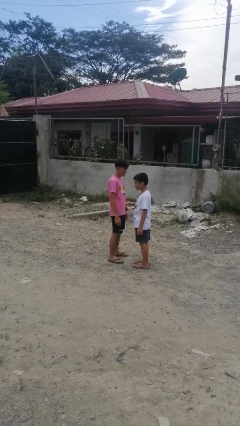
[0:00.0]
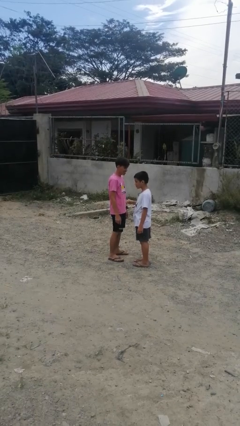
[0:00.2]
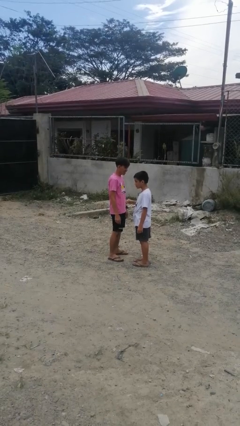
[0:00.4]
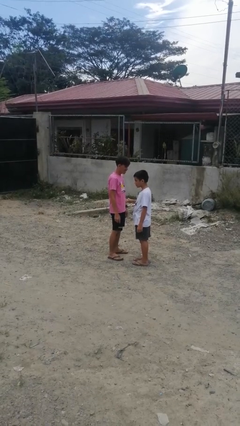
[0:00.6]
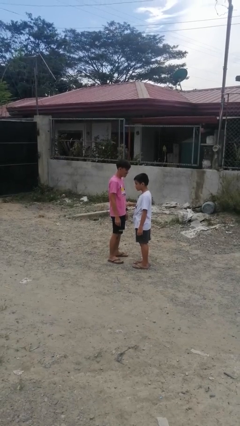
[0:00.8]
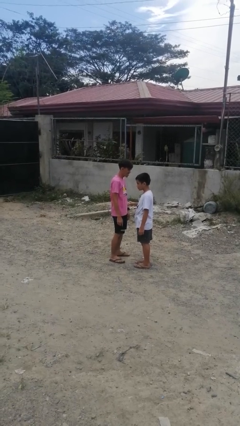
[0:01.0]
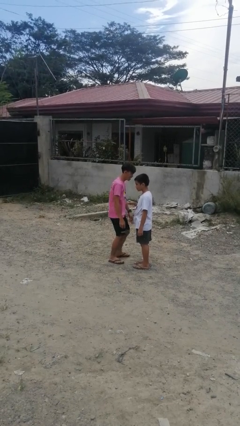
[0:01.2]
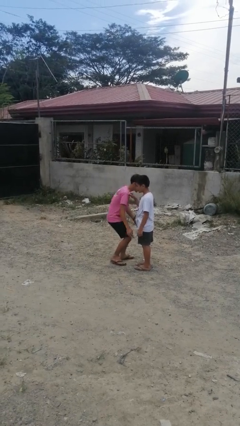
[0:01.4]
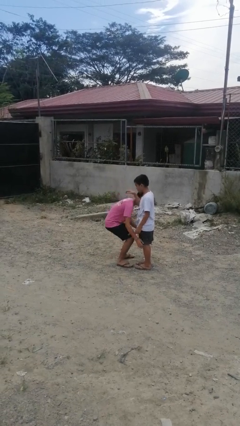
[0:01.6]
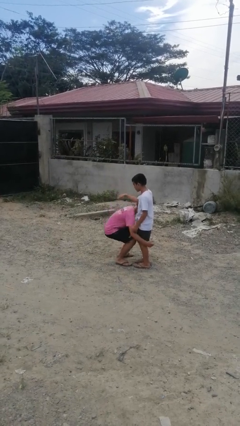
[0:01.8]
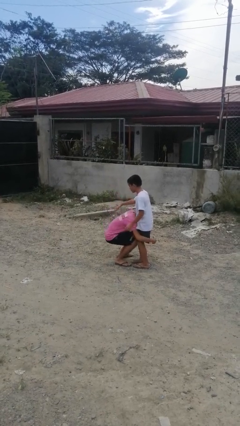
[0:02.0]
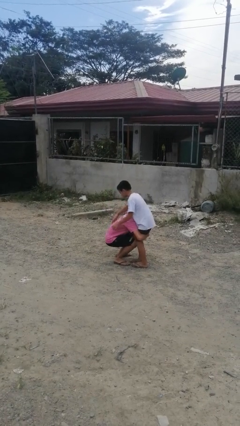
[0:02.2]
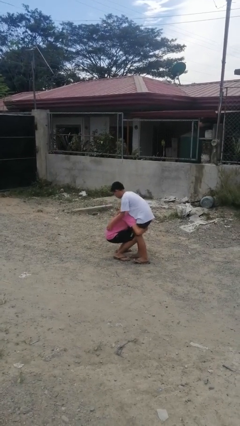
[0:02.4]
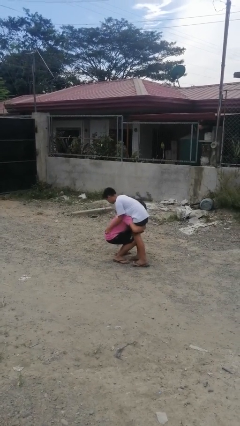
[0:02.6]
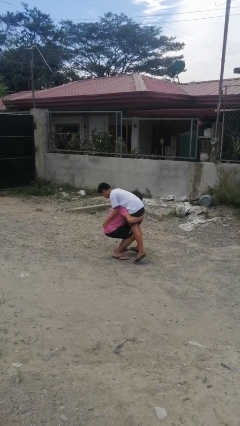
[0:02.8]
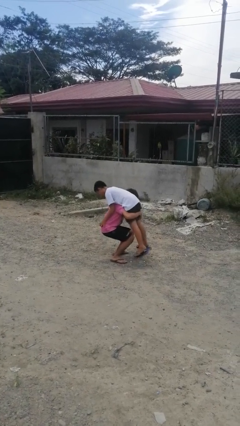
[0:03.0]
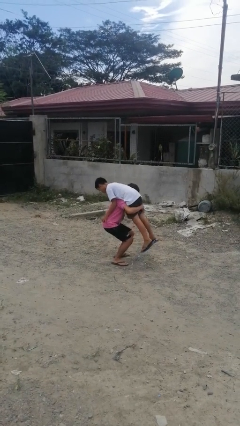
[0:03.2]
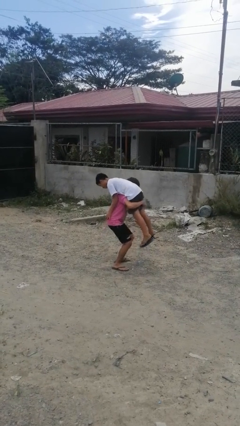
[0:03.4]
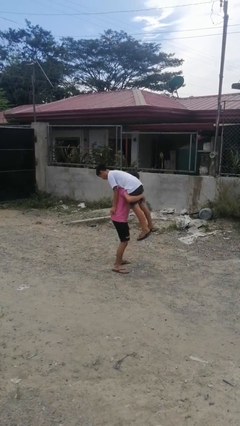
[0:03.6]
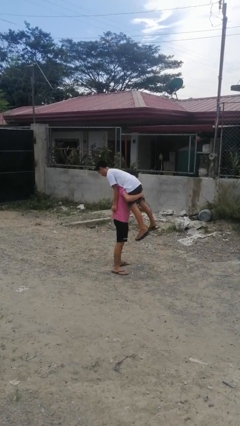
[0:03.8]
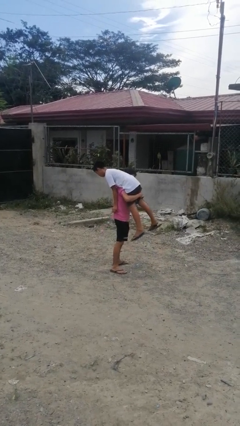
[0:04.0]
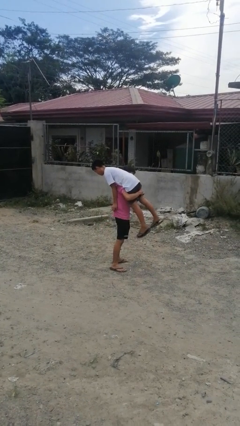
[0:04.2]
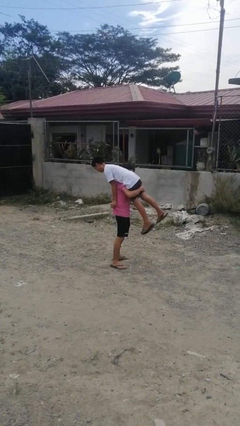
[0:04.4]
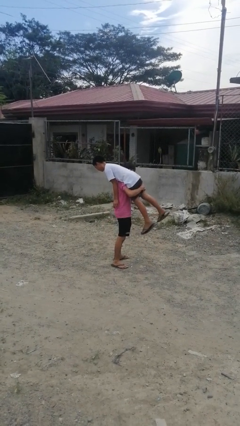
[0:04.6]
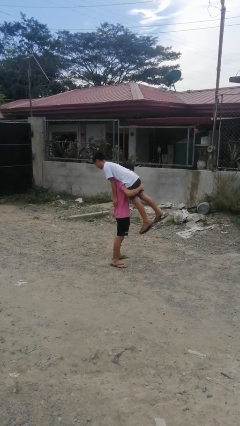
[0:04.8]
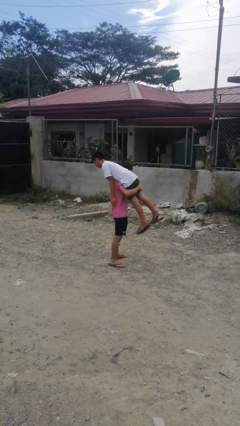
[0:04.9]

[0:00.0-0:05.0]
person carries person over shoulder

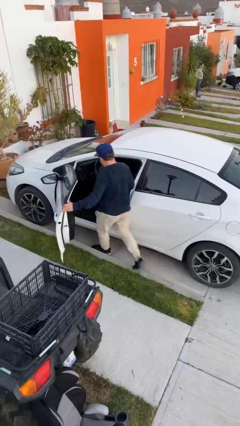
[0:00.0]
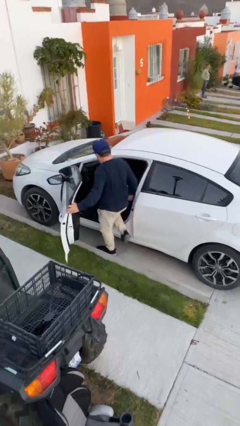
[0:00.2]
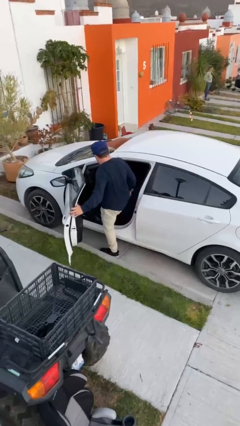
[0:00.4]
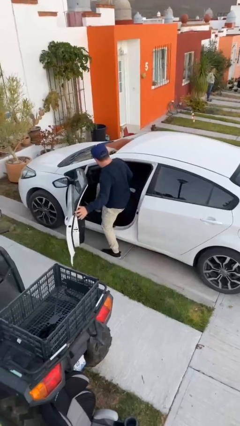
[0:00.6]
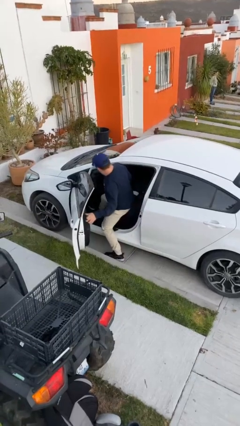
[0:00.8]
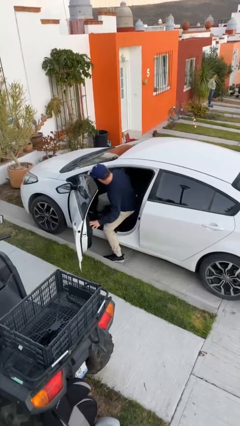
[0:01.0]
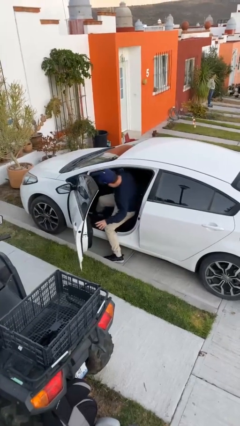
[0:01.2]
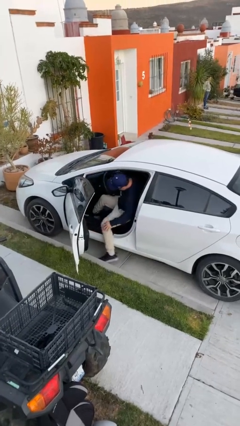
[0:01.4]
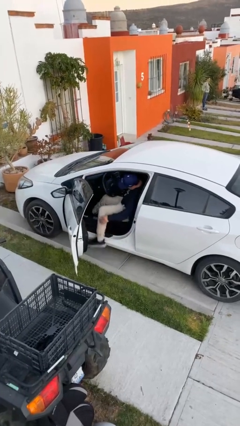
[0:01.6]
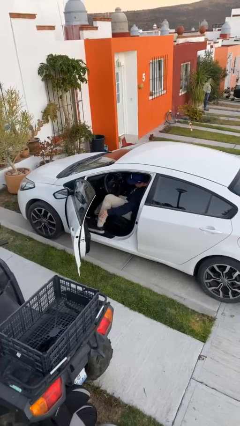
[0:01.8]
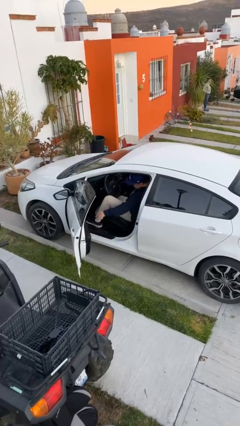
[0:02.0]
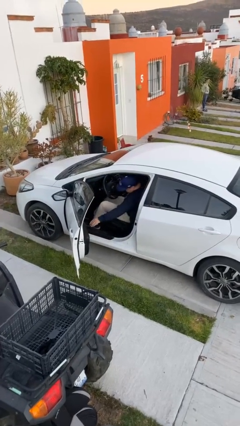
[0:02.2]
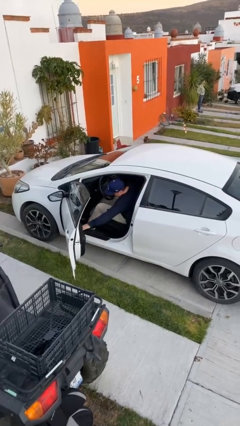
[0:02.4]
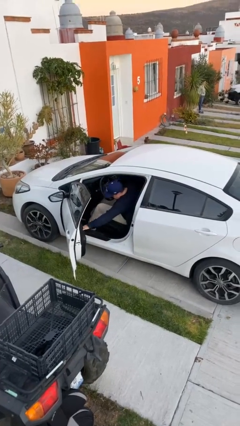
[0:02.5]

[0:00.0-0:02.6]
person enters car

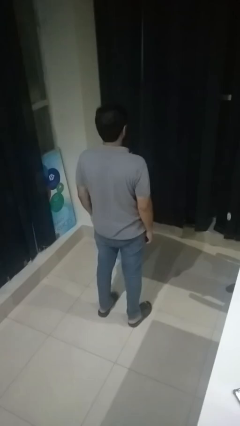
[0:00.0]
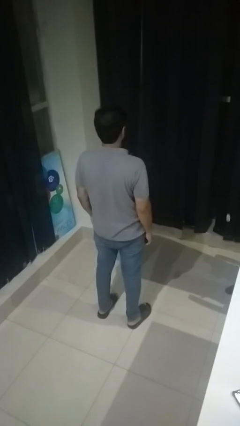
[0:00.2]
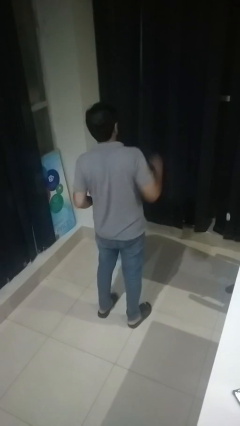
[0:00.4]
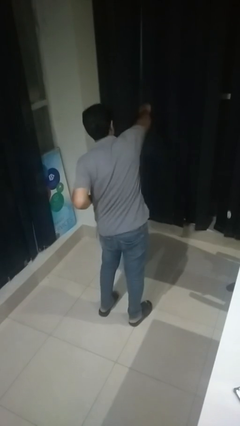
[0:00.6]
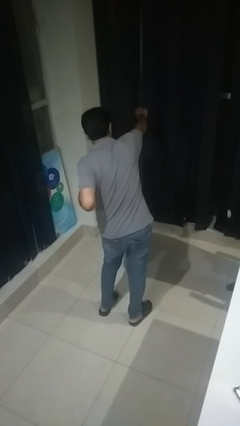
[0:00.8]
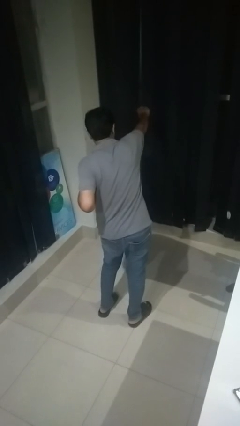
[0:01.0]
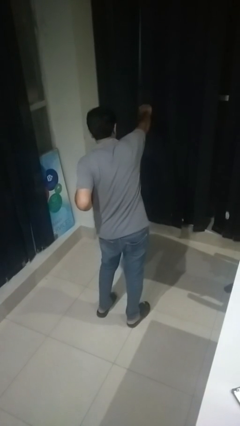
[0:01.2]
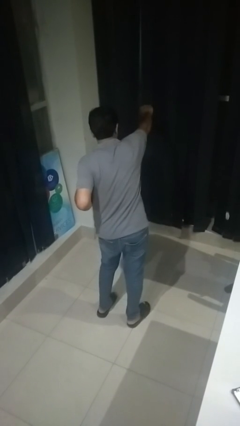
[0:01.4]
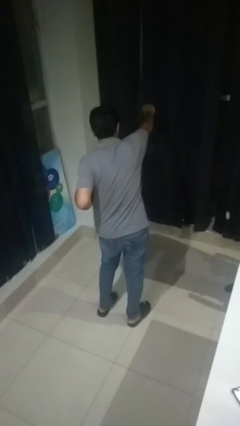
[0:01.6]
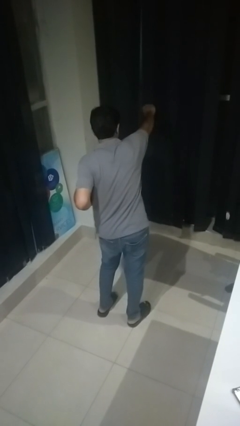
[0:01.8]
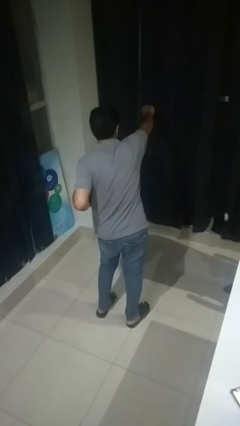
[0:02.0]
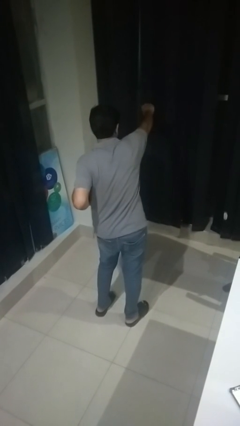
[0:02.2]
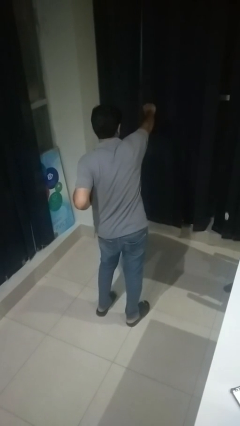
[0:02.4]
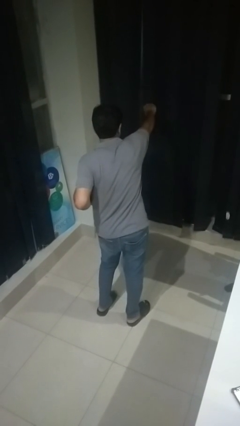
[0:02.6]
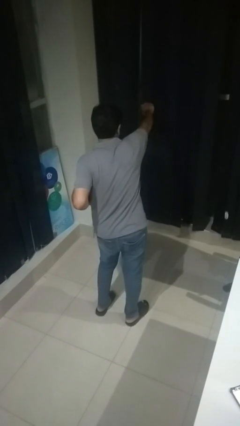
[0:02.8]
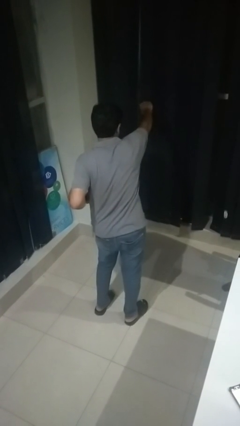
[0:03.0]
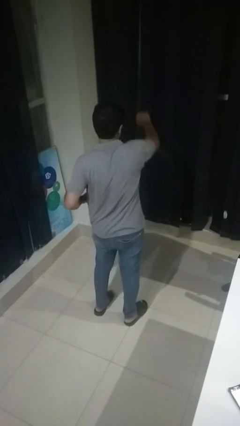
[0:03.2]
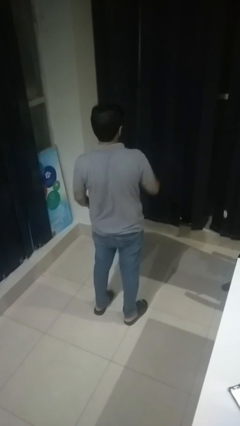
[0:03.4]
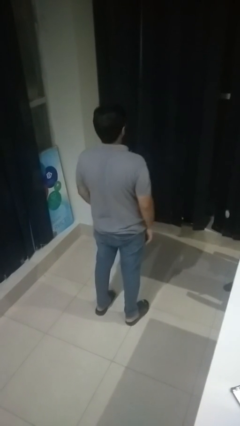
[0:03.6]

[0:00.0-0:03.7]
person punches

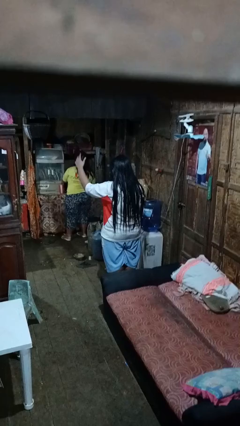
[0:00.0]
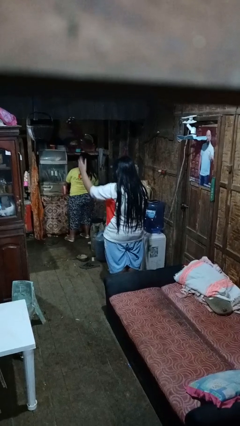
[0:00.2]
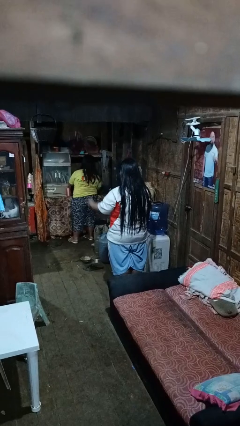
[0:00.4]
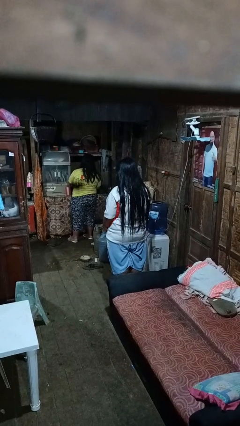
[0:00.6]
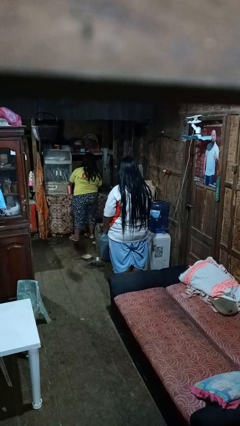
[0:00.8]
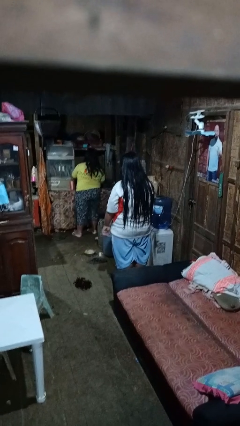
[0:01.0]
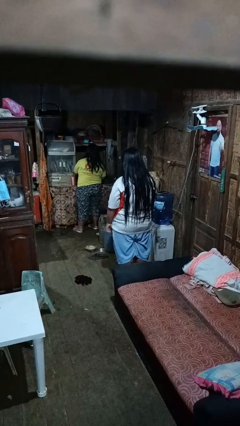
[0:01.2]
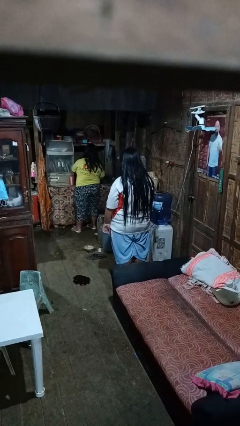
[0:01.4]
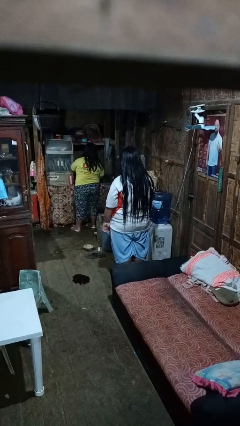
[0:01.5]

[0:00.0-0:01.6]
person throws object into air

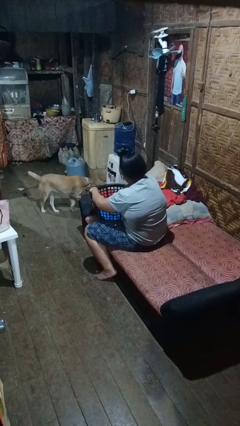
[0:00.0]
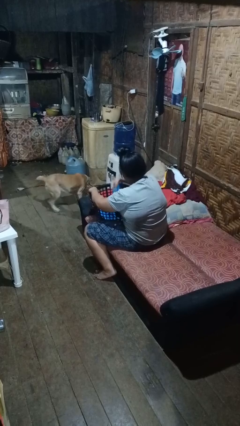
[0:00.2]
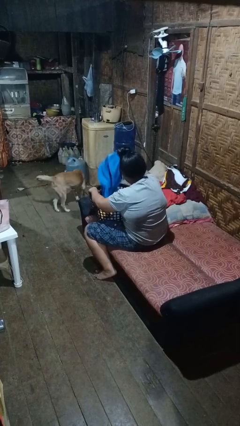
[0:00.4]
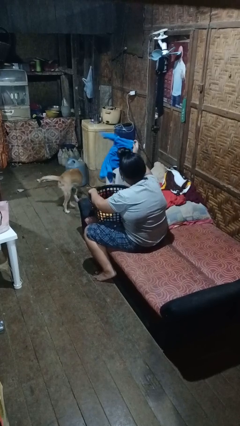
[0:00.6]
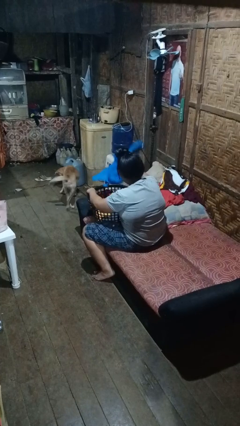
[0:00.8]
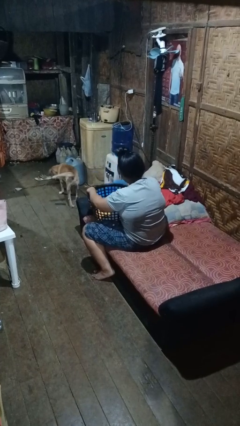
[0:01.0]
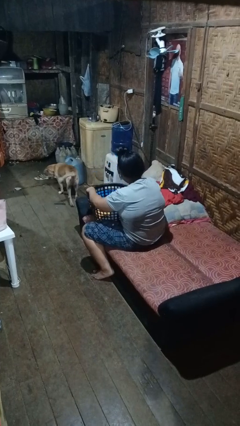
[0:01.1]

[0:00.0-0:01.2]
person takes object from basket

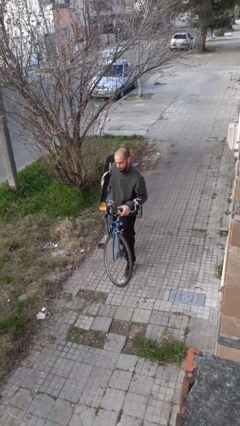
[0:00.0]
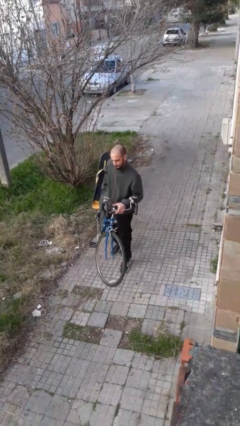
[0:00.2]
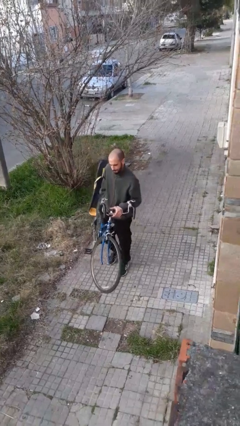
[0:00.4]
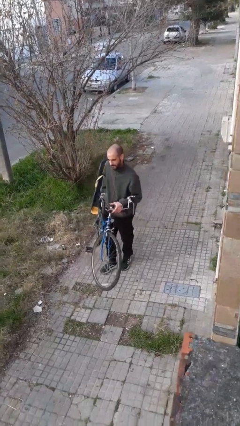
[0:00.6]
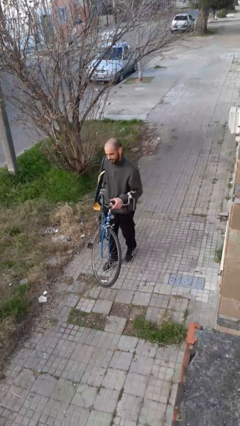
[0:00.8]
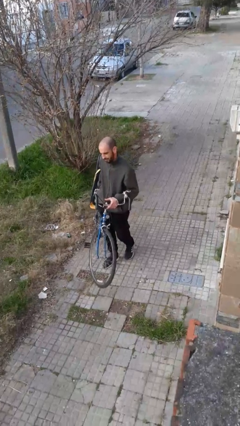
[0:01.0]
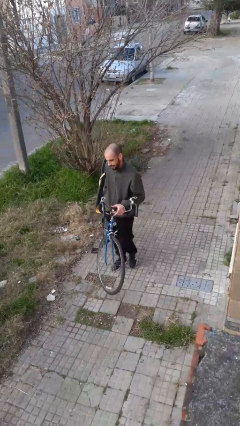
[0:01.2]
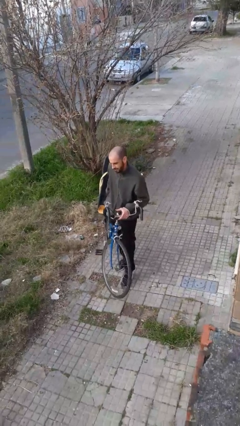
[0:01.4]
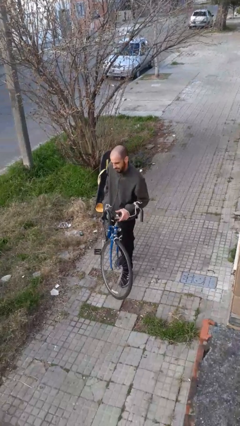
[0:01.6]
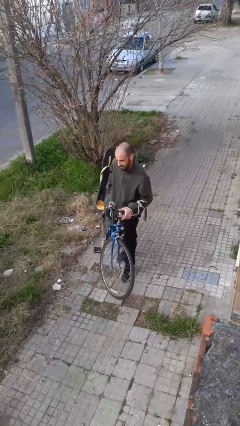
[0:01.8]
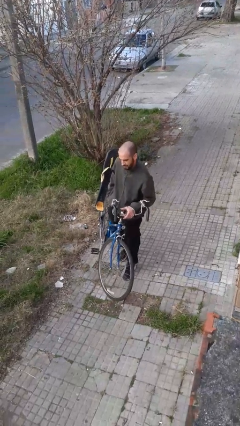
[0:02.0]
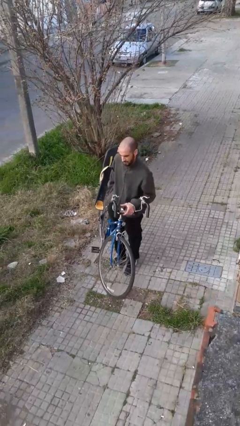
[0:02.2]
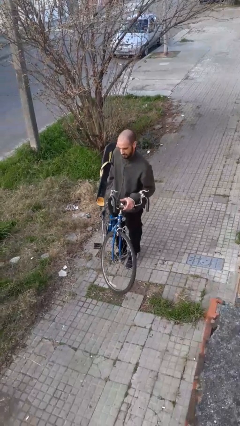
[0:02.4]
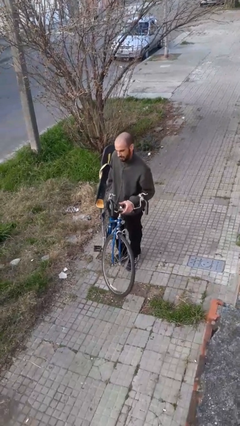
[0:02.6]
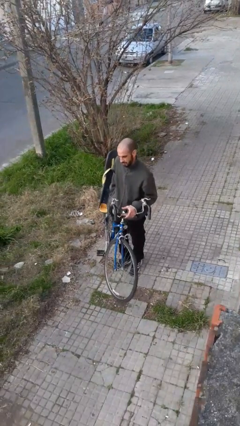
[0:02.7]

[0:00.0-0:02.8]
person carries bicycle

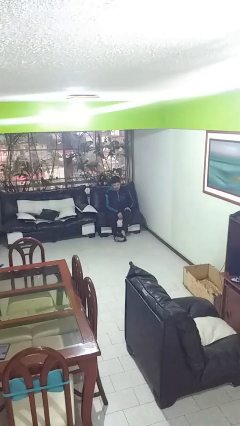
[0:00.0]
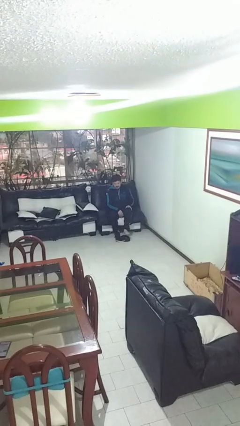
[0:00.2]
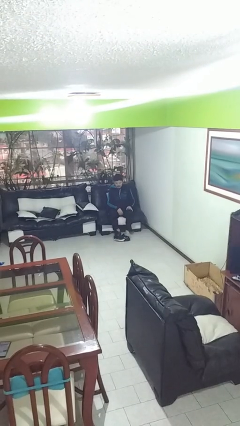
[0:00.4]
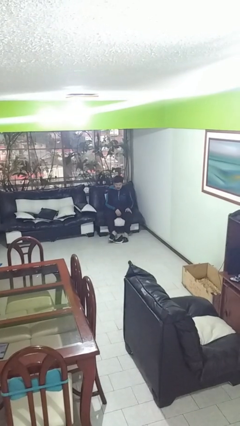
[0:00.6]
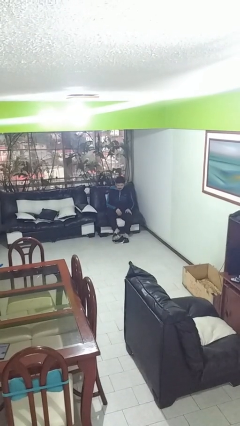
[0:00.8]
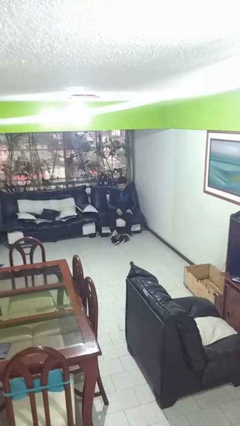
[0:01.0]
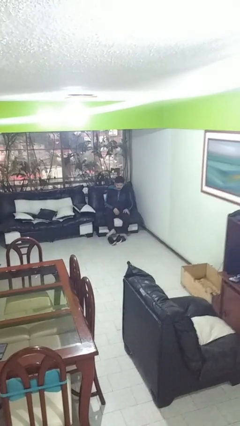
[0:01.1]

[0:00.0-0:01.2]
person takes off shoes
